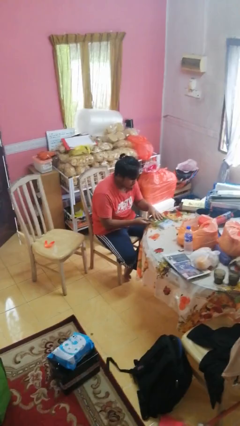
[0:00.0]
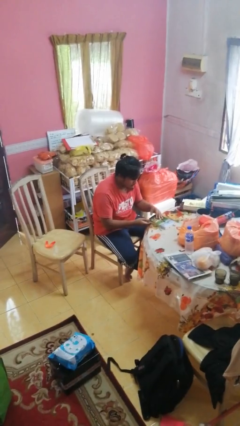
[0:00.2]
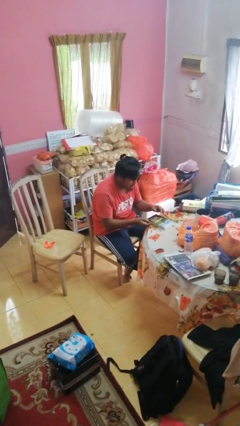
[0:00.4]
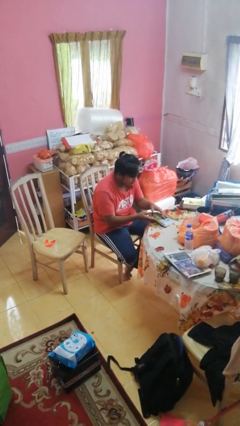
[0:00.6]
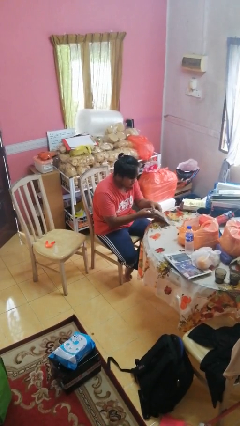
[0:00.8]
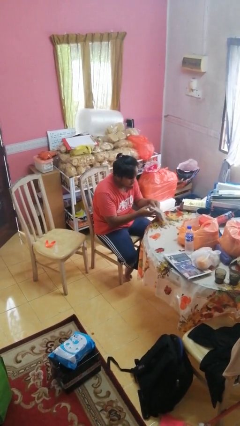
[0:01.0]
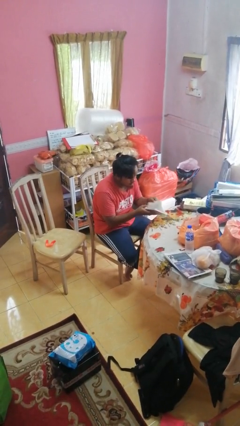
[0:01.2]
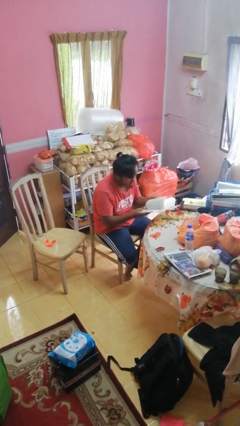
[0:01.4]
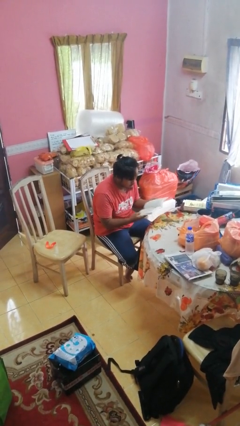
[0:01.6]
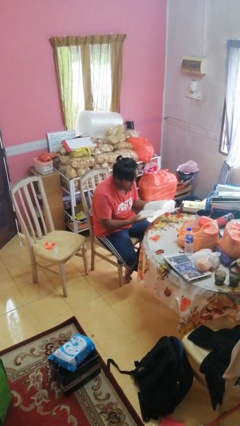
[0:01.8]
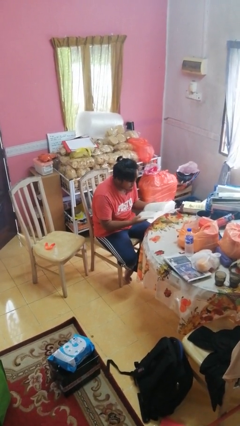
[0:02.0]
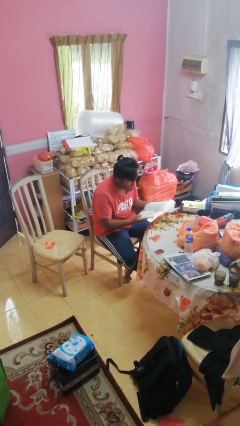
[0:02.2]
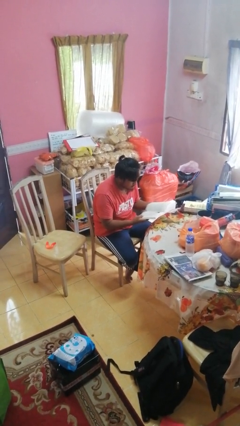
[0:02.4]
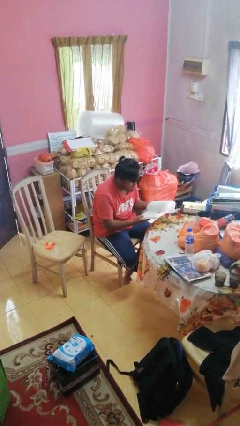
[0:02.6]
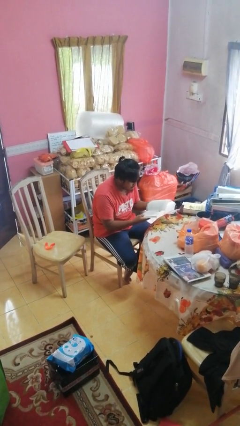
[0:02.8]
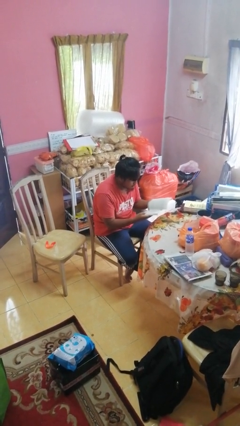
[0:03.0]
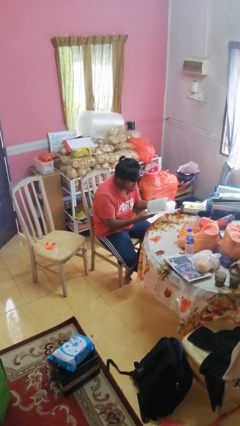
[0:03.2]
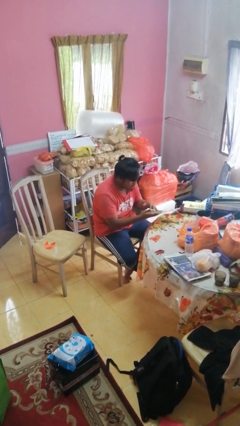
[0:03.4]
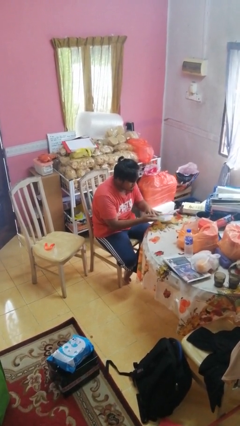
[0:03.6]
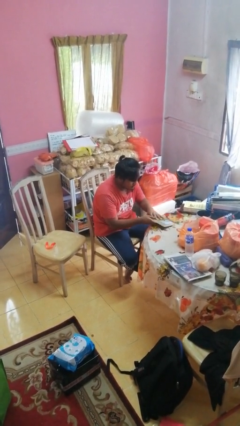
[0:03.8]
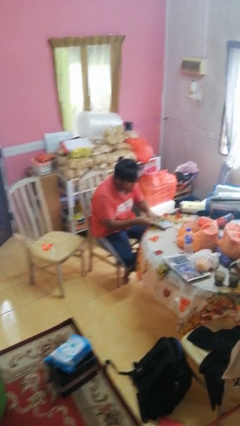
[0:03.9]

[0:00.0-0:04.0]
person reads book

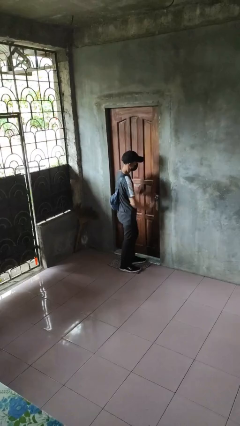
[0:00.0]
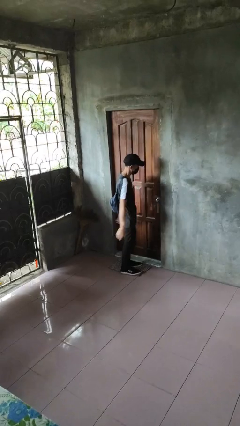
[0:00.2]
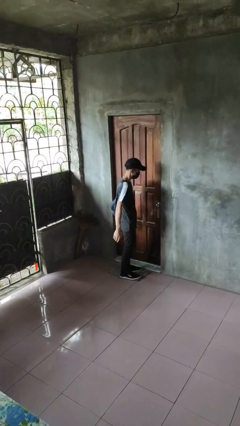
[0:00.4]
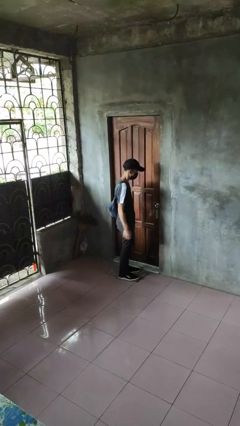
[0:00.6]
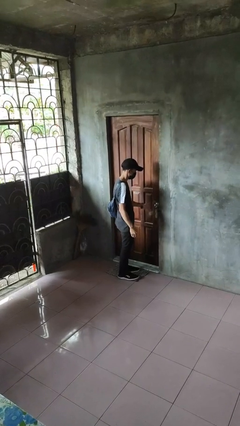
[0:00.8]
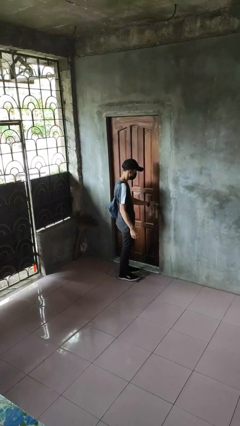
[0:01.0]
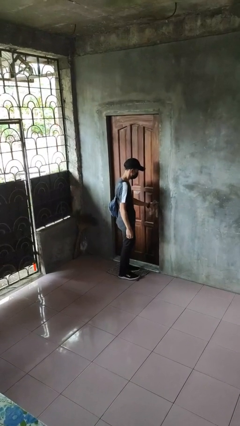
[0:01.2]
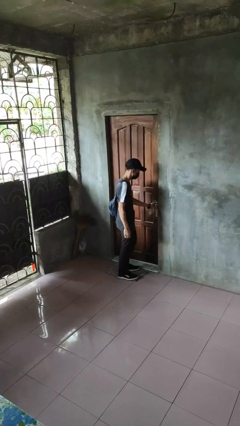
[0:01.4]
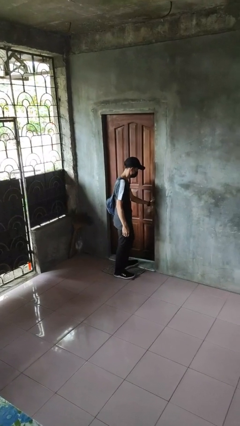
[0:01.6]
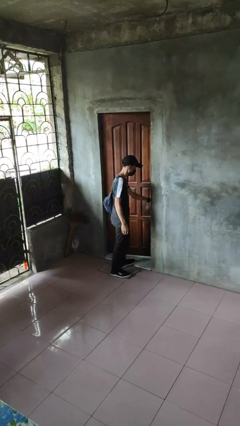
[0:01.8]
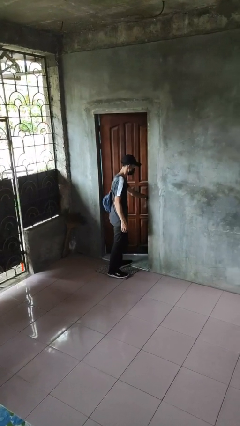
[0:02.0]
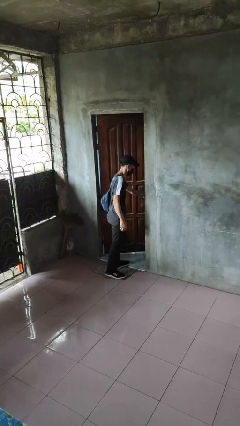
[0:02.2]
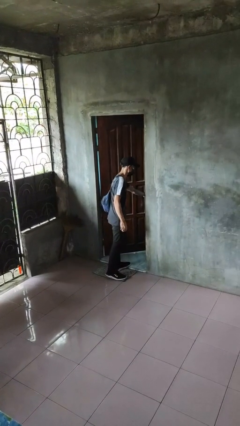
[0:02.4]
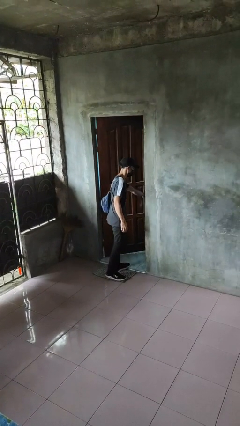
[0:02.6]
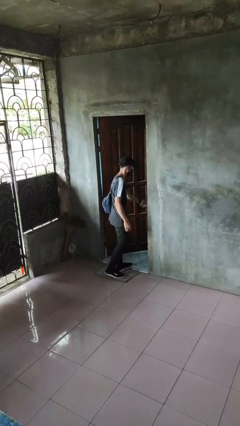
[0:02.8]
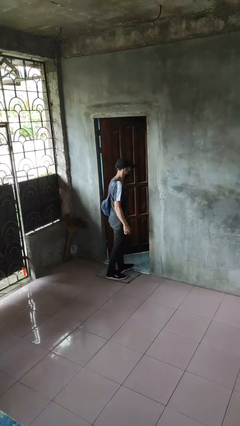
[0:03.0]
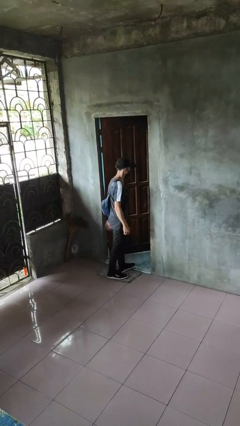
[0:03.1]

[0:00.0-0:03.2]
person opens facility door

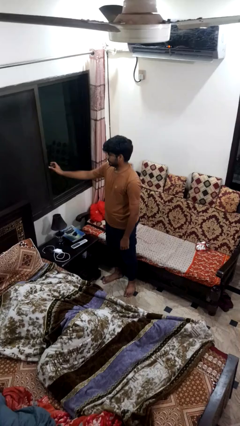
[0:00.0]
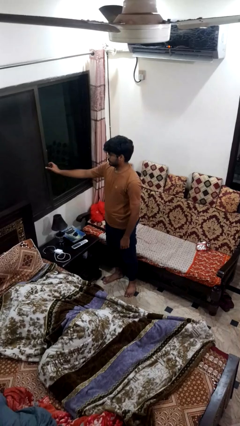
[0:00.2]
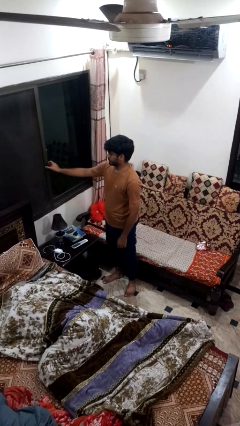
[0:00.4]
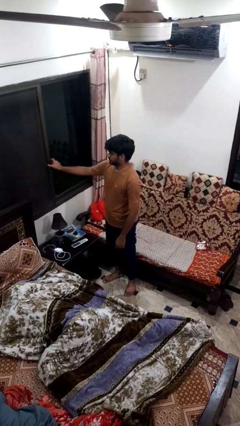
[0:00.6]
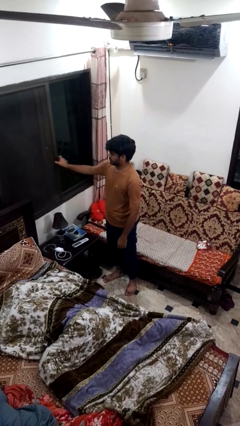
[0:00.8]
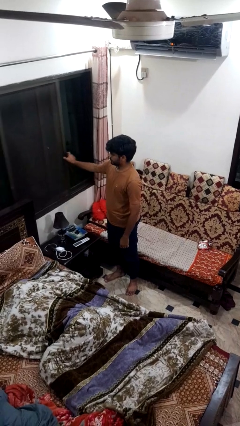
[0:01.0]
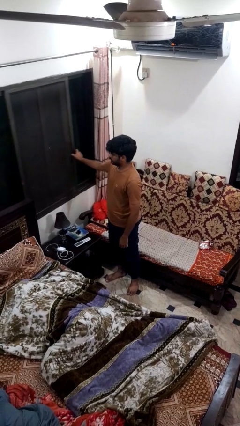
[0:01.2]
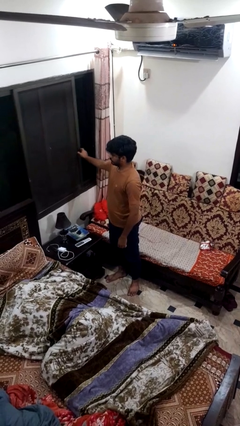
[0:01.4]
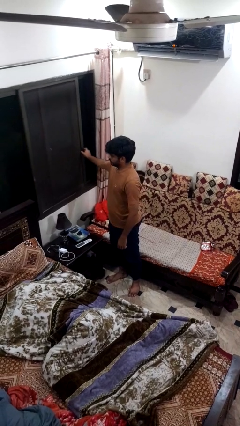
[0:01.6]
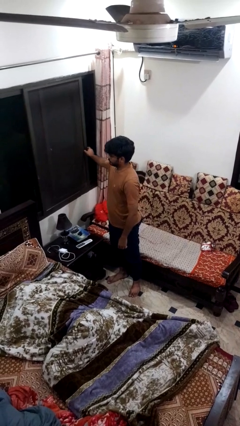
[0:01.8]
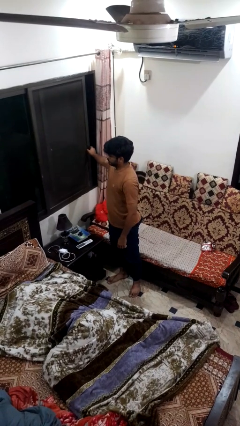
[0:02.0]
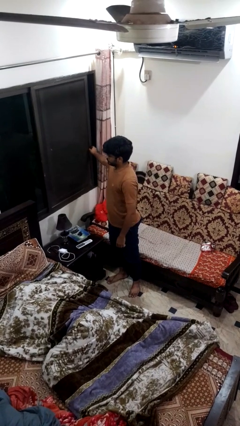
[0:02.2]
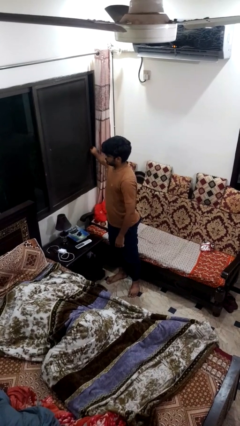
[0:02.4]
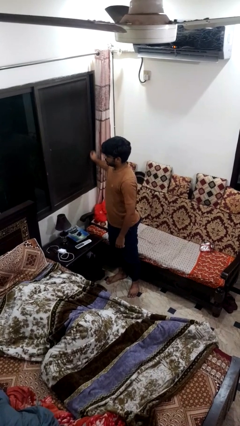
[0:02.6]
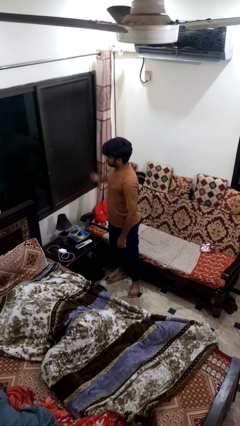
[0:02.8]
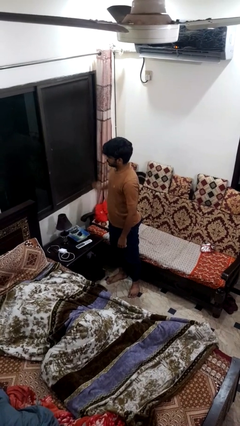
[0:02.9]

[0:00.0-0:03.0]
person opens home window

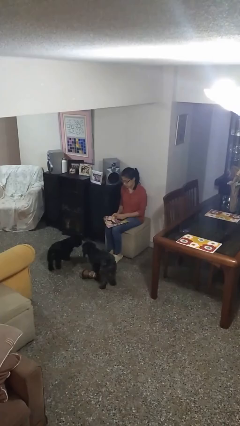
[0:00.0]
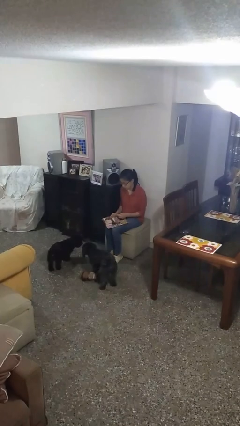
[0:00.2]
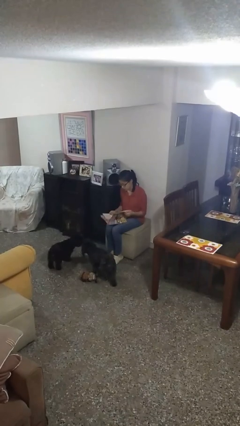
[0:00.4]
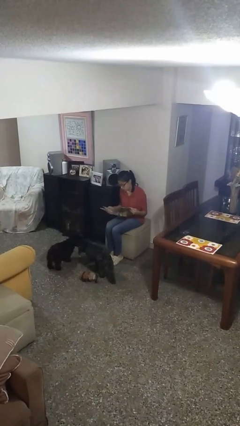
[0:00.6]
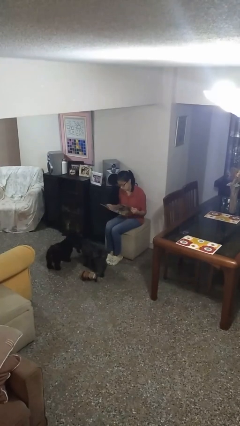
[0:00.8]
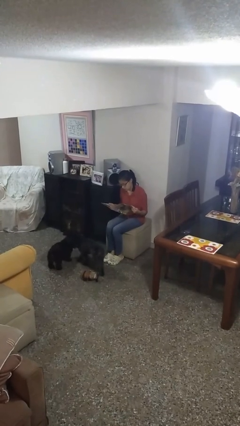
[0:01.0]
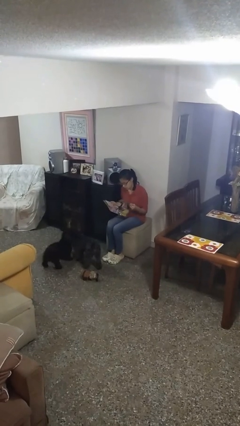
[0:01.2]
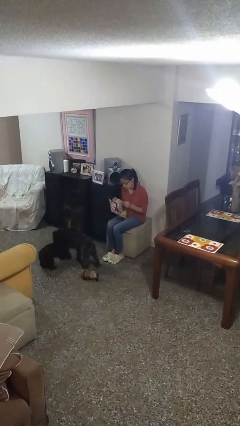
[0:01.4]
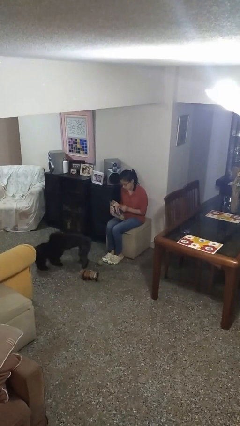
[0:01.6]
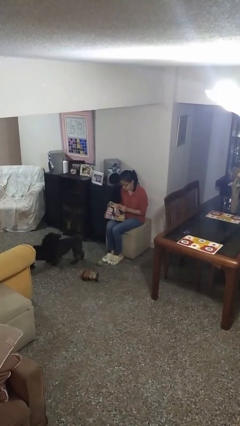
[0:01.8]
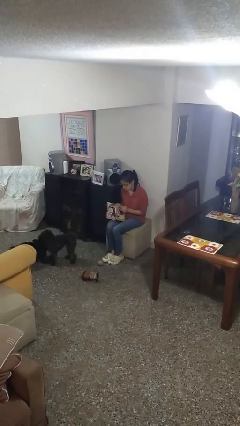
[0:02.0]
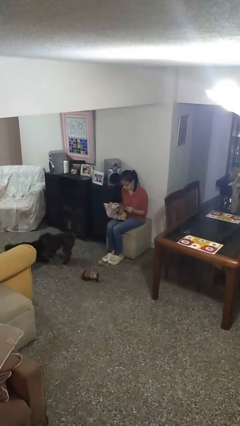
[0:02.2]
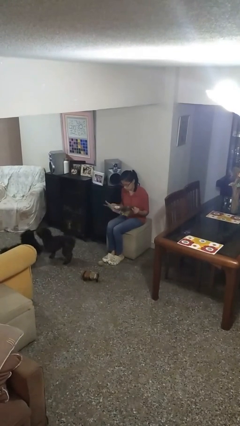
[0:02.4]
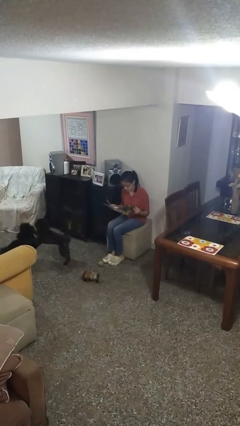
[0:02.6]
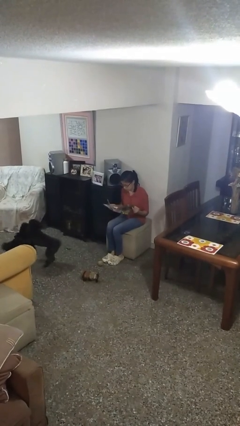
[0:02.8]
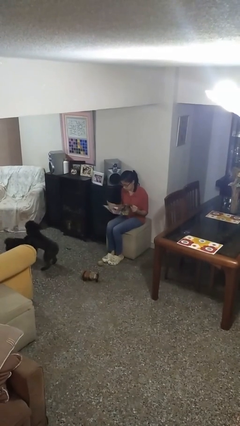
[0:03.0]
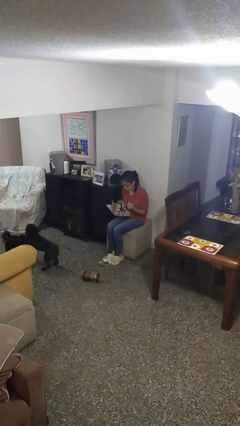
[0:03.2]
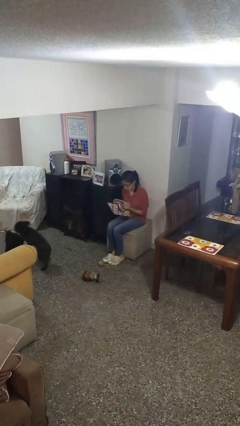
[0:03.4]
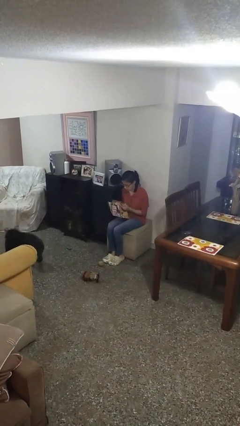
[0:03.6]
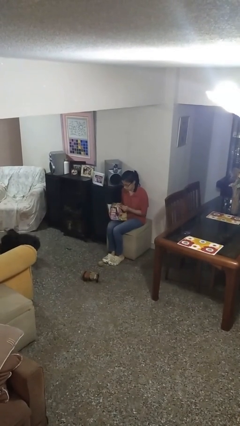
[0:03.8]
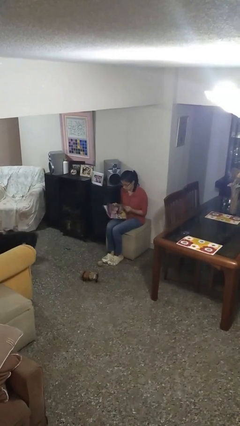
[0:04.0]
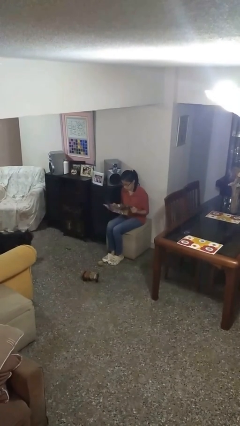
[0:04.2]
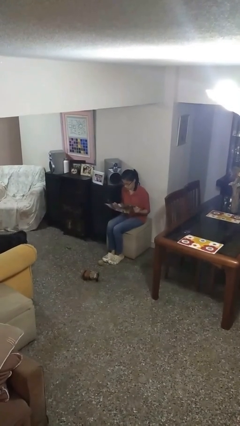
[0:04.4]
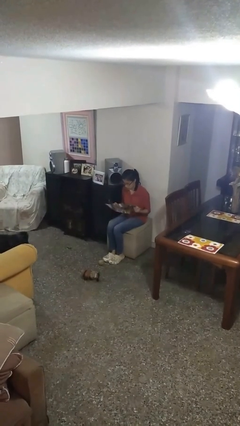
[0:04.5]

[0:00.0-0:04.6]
person reads magazine

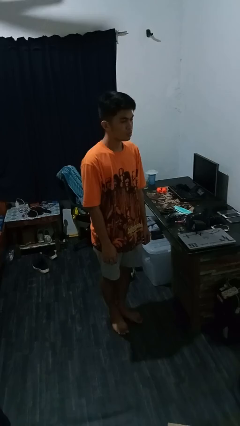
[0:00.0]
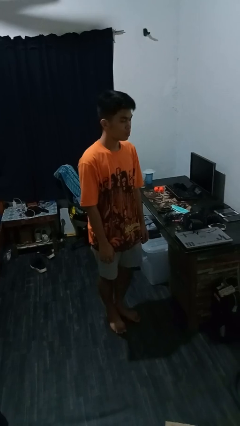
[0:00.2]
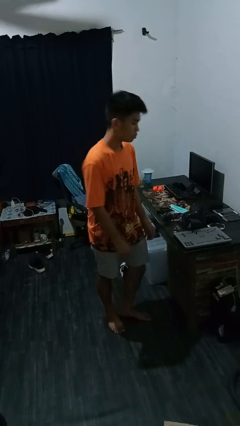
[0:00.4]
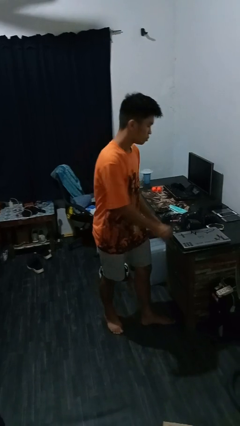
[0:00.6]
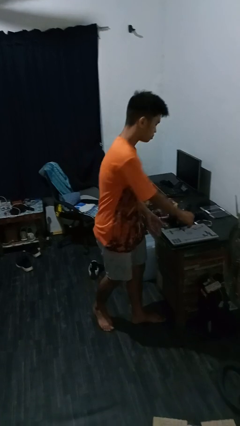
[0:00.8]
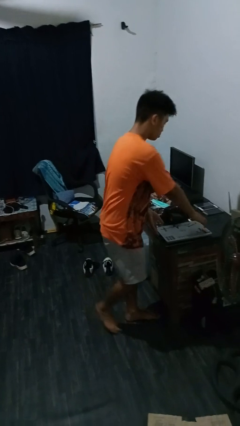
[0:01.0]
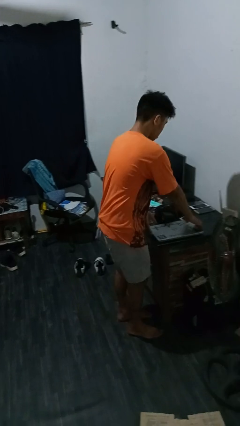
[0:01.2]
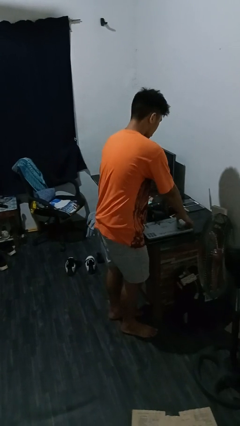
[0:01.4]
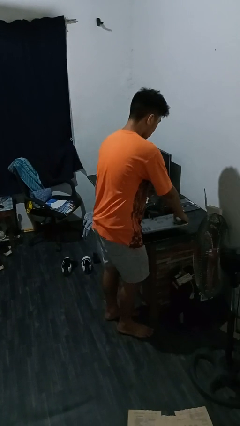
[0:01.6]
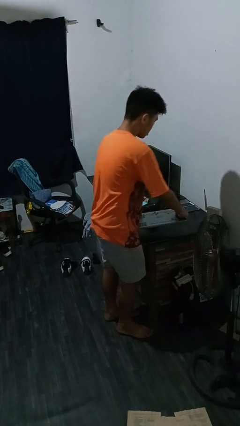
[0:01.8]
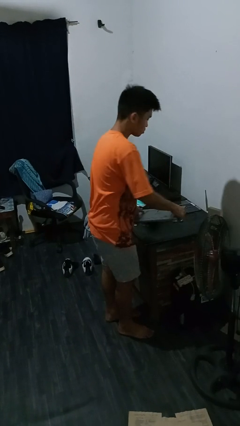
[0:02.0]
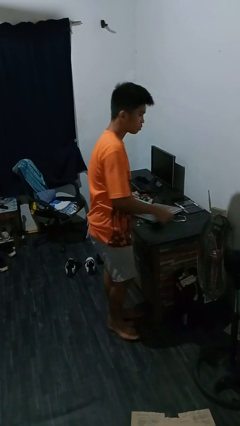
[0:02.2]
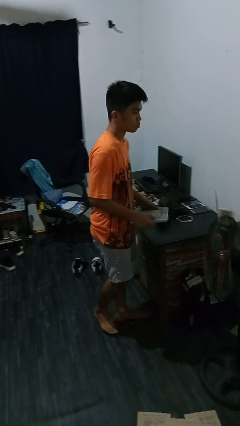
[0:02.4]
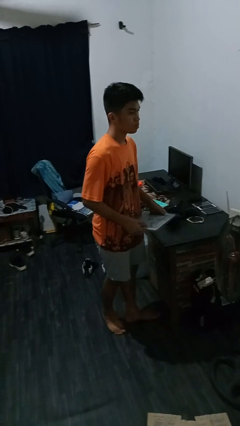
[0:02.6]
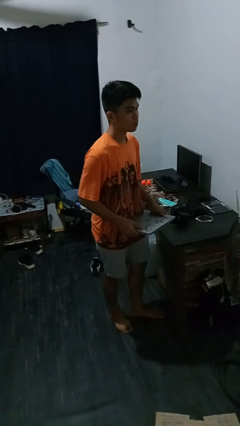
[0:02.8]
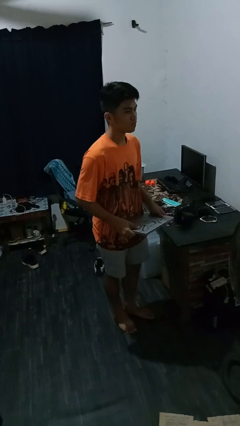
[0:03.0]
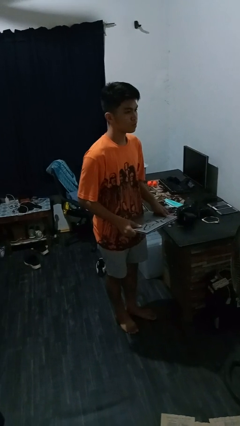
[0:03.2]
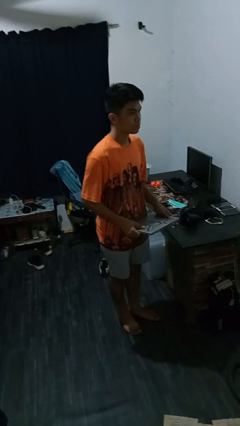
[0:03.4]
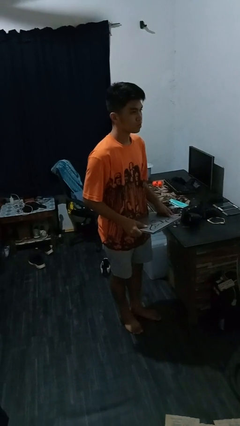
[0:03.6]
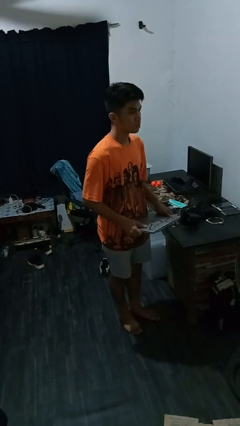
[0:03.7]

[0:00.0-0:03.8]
person picks up object from countertop
